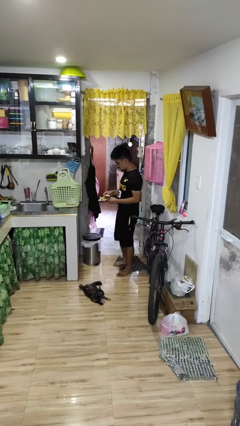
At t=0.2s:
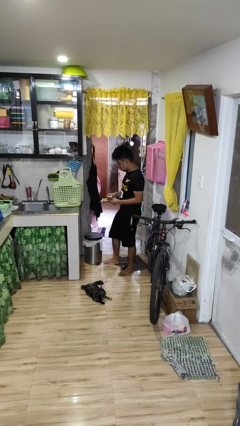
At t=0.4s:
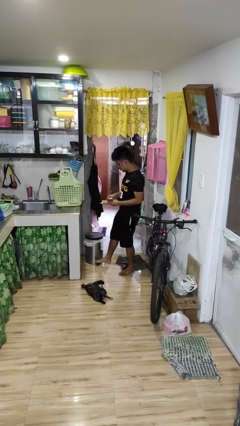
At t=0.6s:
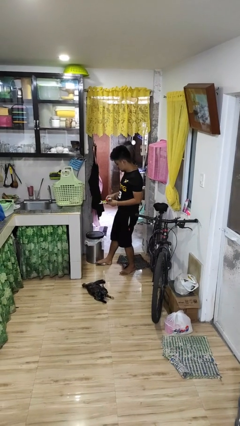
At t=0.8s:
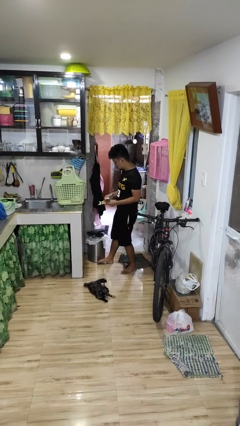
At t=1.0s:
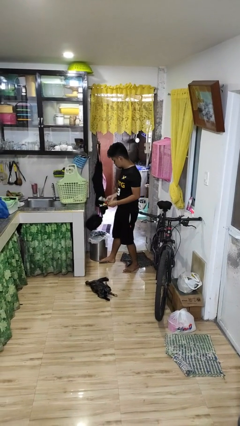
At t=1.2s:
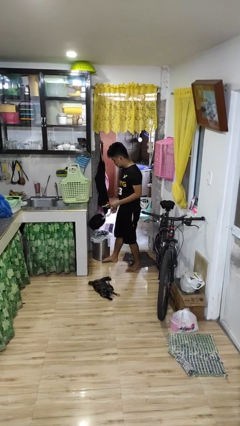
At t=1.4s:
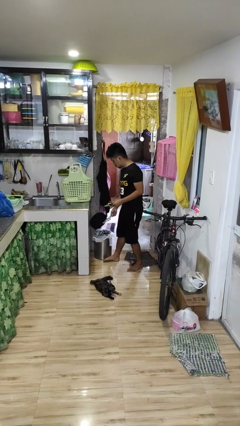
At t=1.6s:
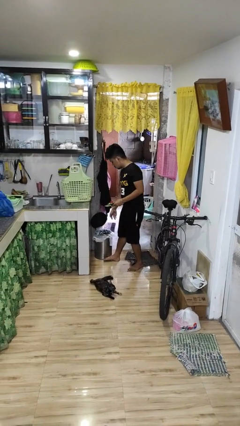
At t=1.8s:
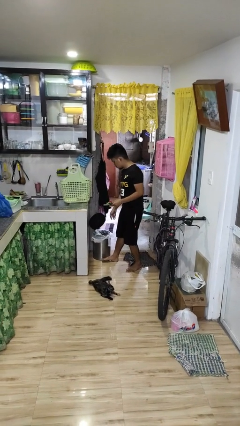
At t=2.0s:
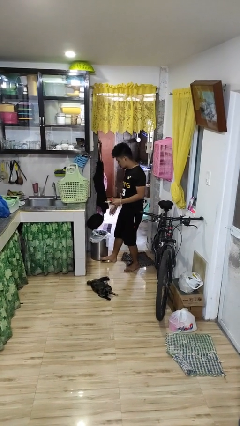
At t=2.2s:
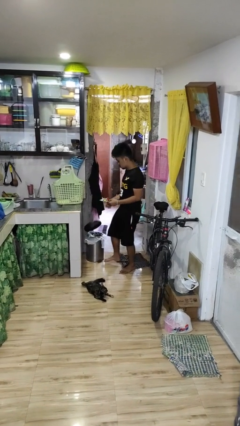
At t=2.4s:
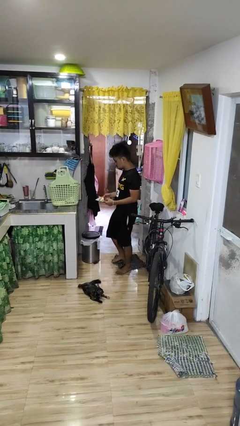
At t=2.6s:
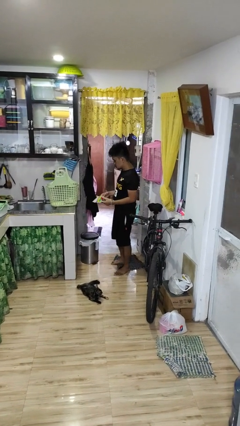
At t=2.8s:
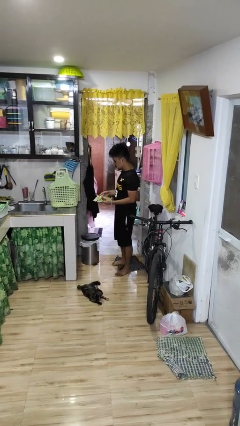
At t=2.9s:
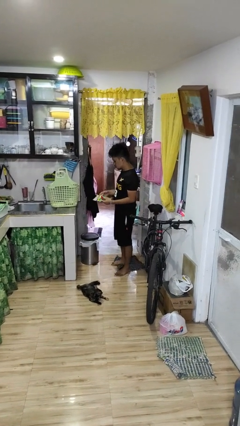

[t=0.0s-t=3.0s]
person discards trash

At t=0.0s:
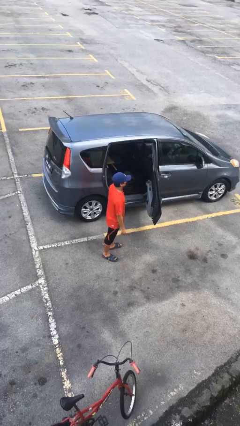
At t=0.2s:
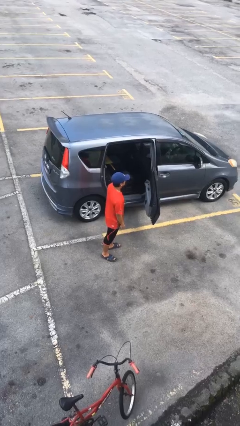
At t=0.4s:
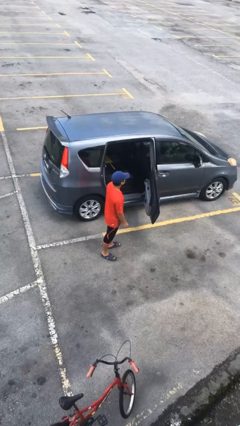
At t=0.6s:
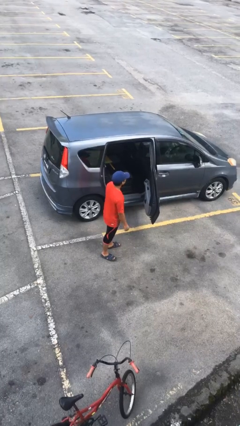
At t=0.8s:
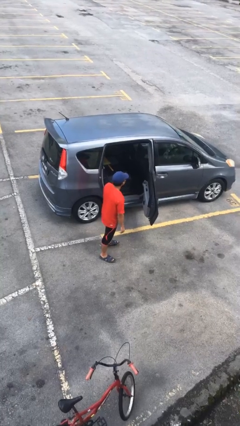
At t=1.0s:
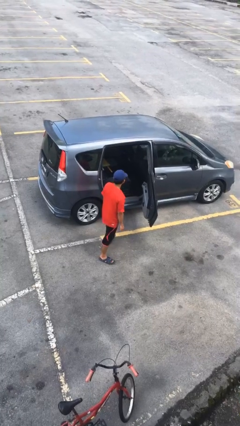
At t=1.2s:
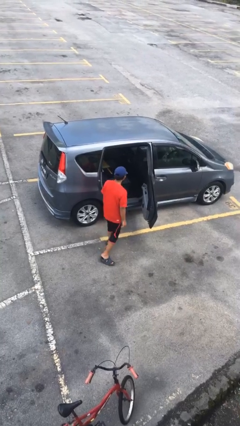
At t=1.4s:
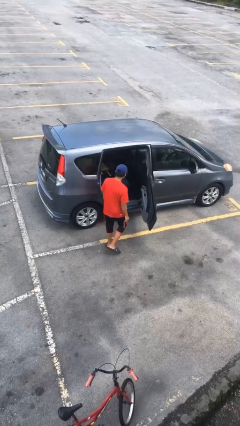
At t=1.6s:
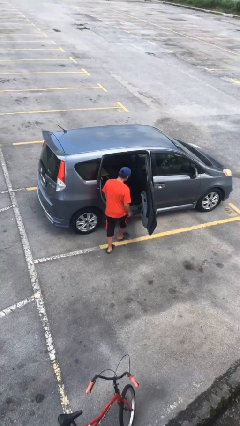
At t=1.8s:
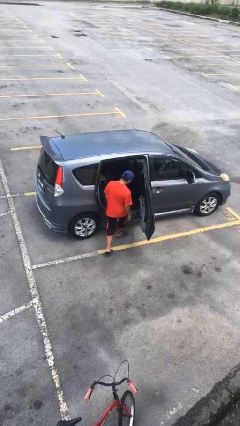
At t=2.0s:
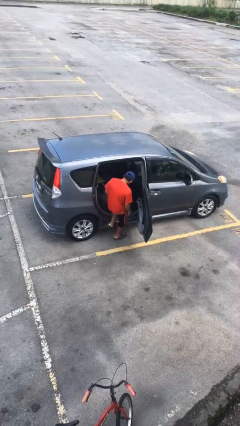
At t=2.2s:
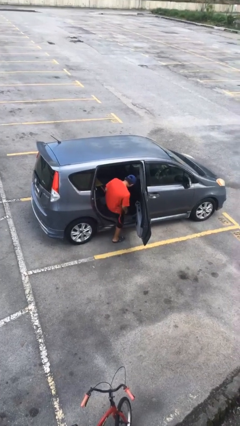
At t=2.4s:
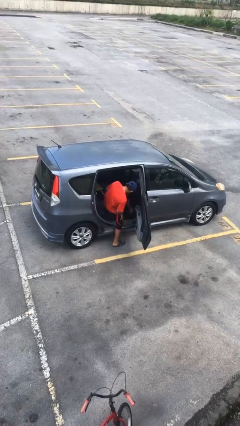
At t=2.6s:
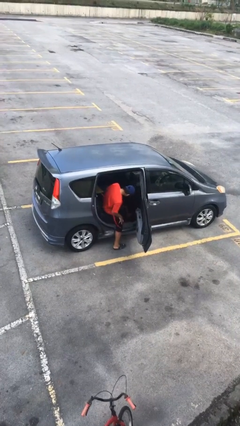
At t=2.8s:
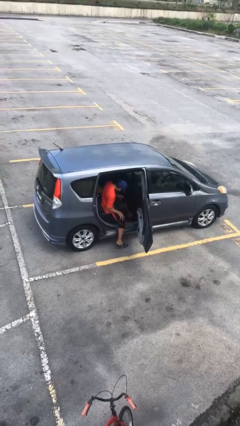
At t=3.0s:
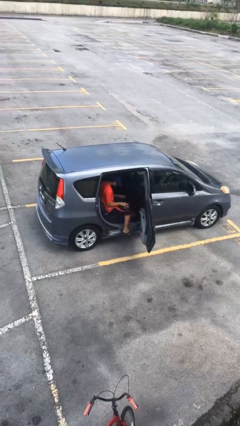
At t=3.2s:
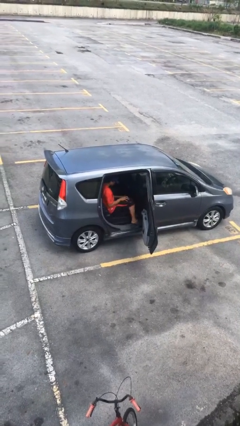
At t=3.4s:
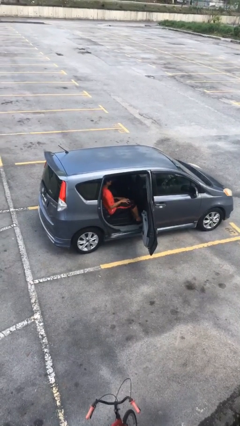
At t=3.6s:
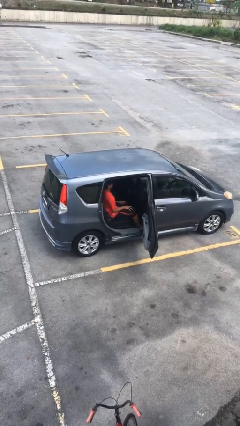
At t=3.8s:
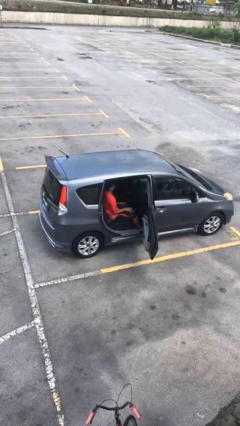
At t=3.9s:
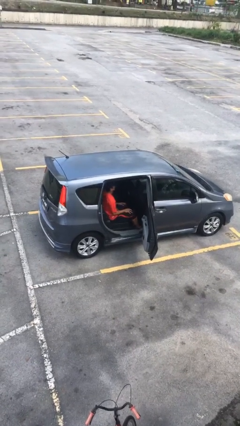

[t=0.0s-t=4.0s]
person enters car

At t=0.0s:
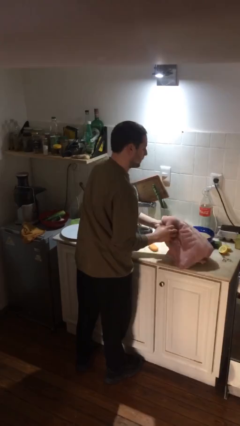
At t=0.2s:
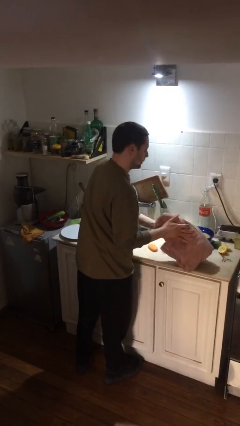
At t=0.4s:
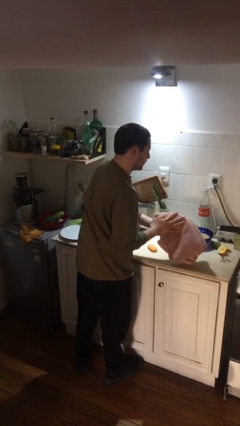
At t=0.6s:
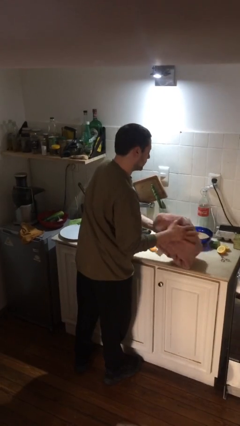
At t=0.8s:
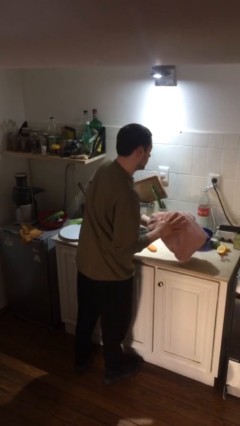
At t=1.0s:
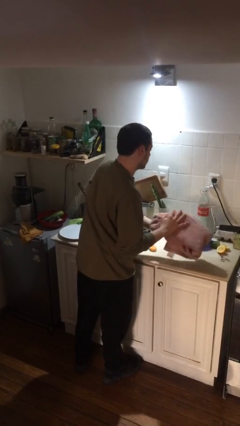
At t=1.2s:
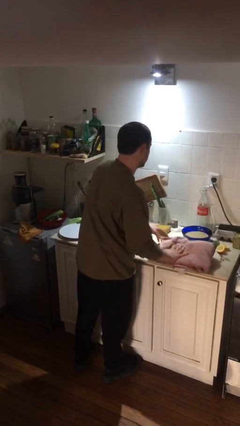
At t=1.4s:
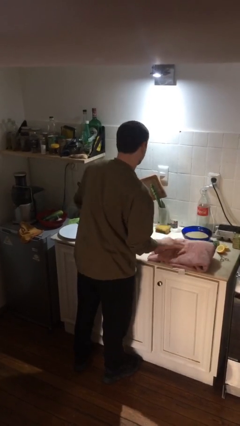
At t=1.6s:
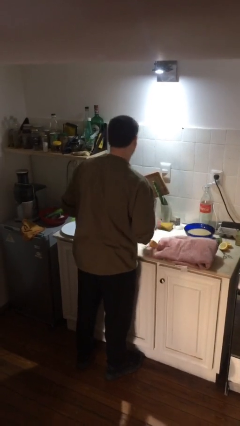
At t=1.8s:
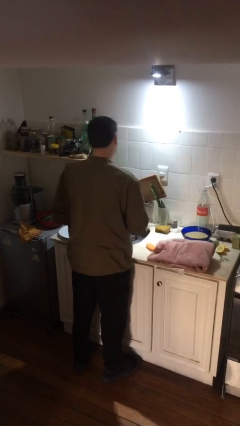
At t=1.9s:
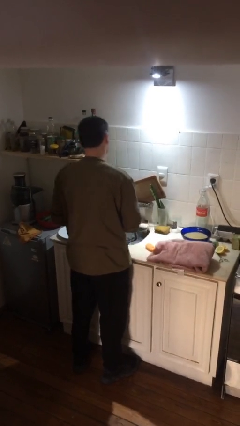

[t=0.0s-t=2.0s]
person dries hands with towel

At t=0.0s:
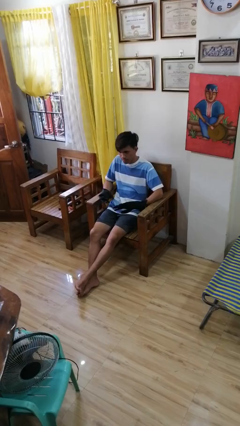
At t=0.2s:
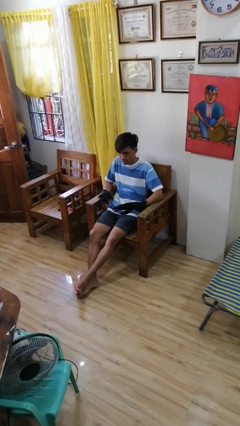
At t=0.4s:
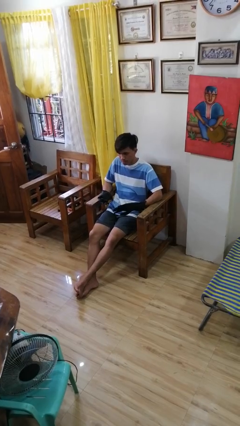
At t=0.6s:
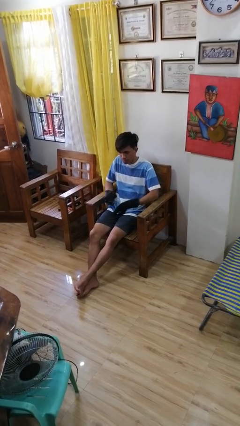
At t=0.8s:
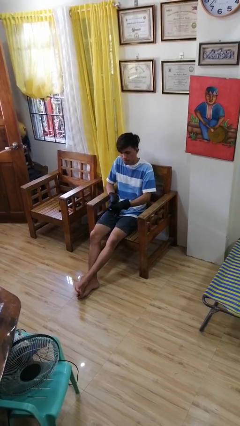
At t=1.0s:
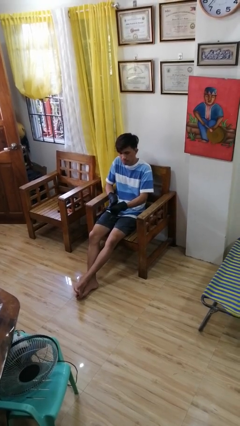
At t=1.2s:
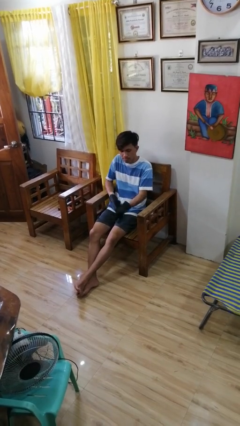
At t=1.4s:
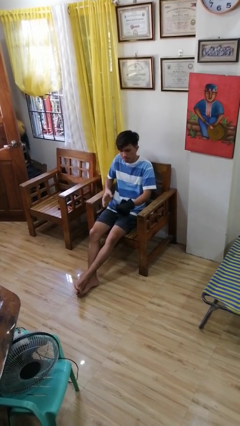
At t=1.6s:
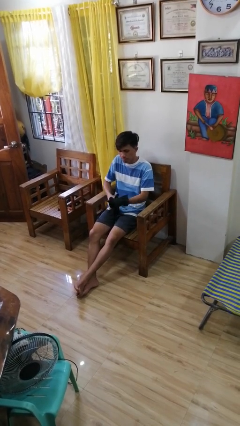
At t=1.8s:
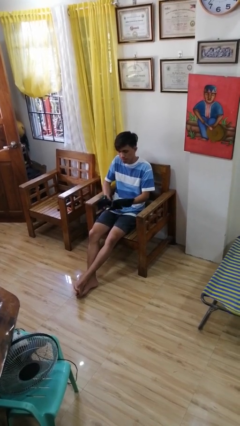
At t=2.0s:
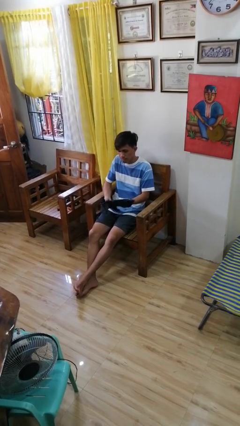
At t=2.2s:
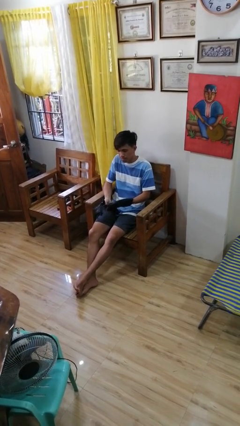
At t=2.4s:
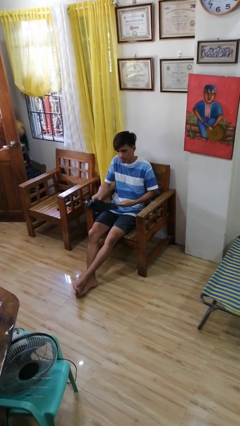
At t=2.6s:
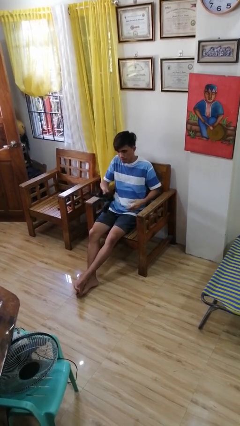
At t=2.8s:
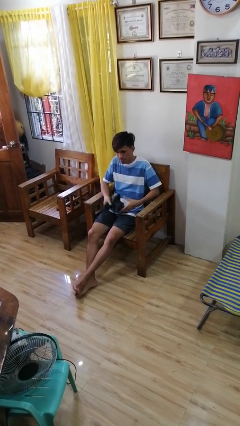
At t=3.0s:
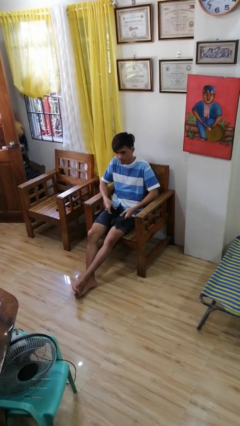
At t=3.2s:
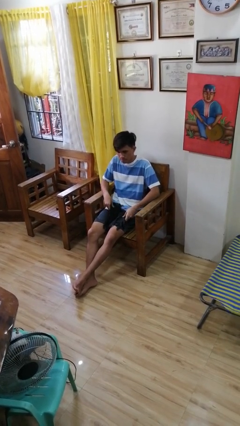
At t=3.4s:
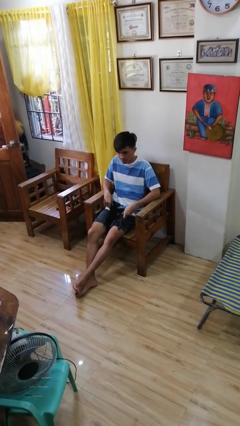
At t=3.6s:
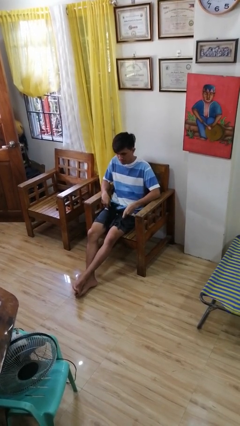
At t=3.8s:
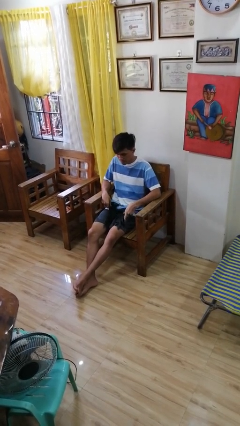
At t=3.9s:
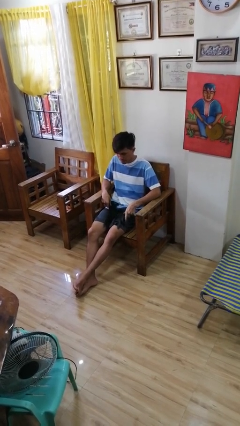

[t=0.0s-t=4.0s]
person takes off gloves

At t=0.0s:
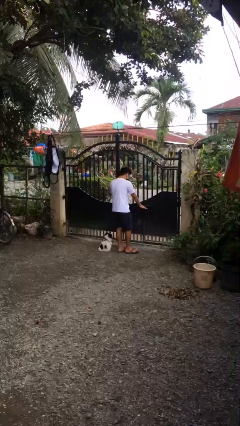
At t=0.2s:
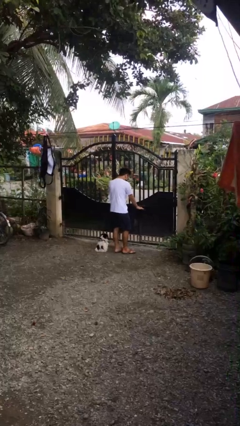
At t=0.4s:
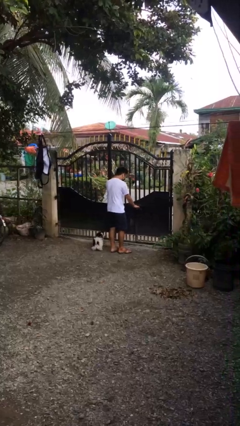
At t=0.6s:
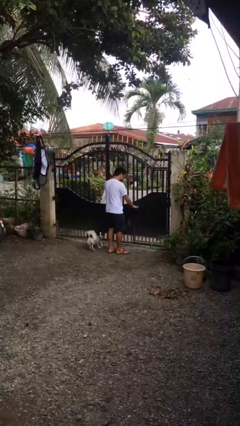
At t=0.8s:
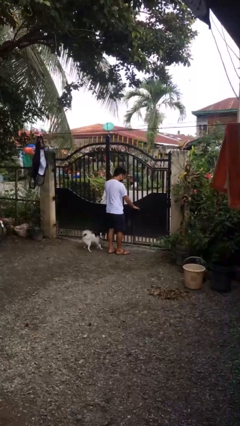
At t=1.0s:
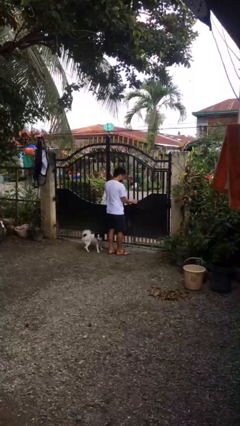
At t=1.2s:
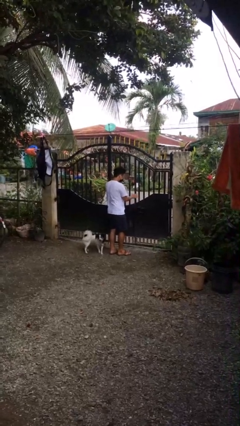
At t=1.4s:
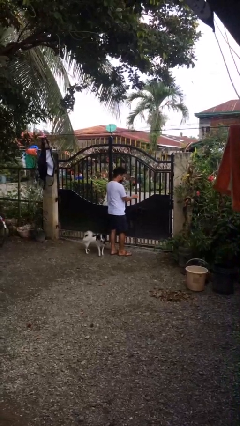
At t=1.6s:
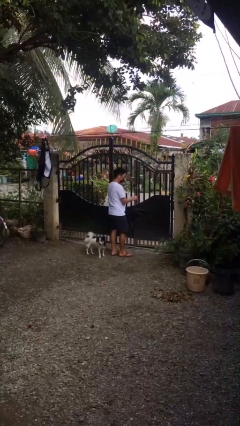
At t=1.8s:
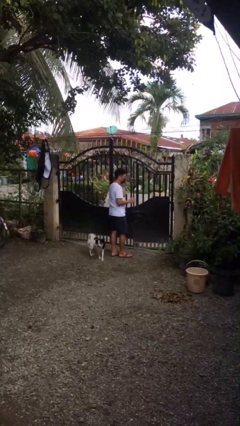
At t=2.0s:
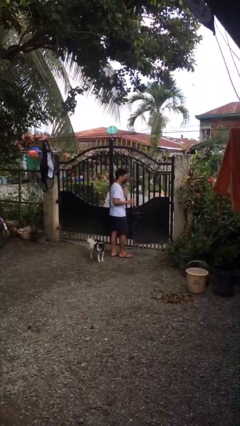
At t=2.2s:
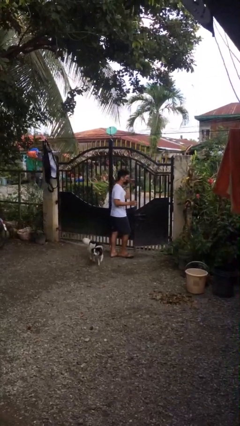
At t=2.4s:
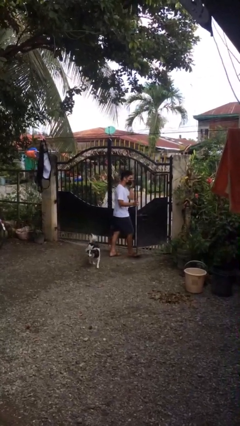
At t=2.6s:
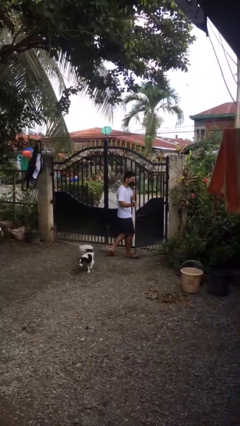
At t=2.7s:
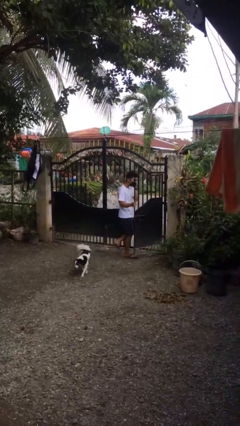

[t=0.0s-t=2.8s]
person opens facility door

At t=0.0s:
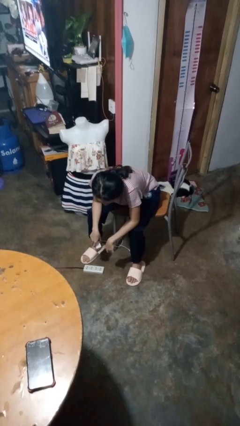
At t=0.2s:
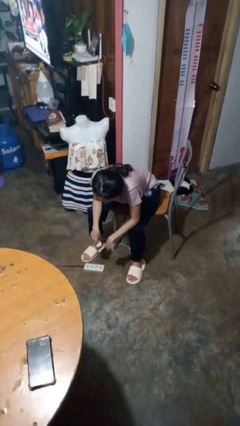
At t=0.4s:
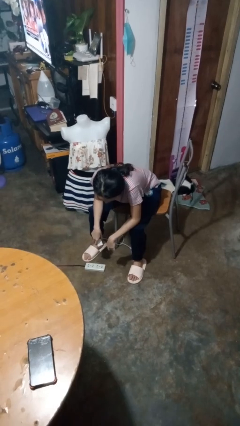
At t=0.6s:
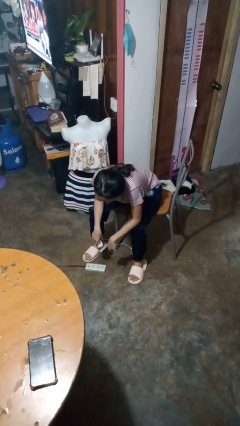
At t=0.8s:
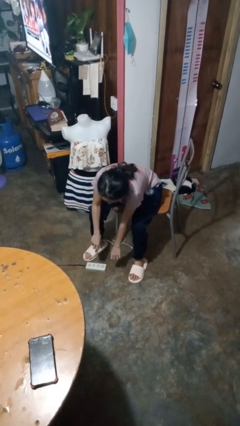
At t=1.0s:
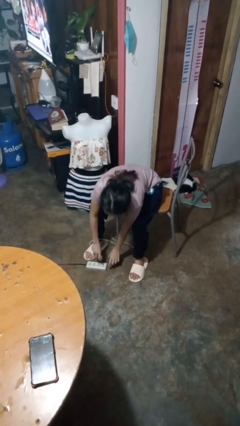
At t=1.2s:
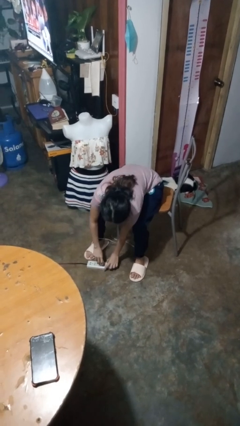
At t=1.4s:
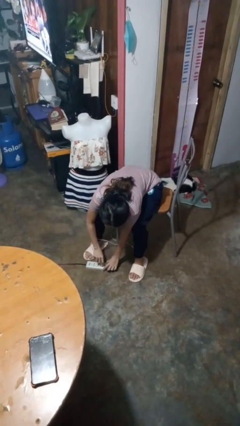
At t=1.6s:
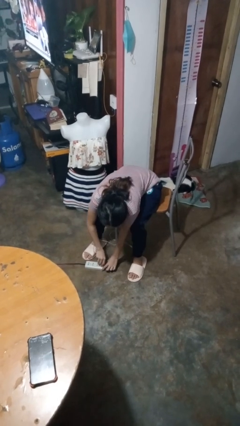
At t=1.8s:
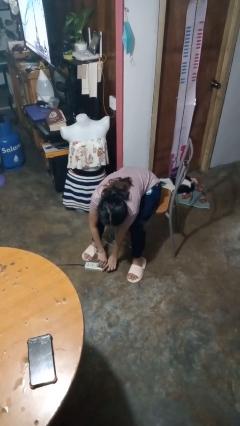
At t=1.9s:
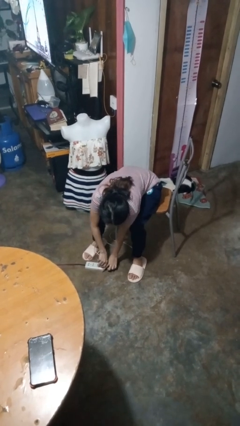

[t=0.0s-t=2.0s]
person plugs into electrical socket
